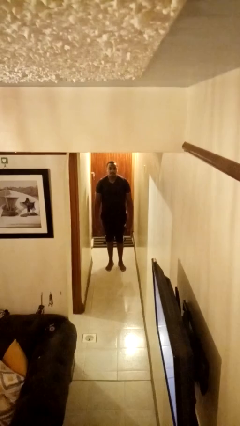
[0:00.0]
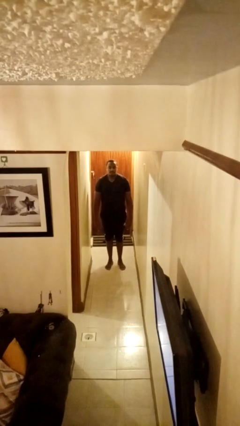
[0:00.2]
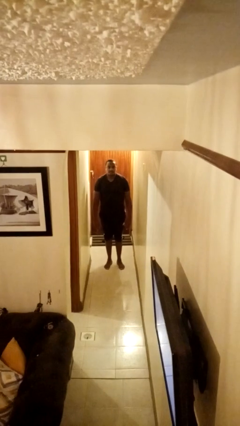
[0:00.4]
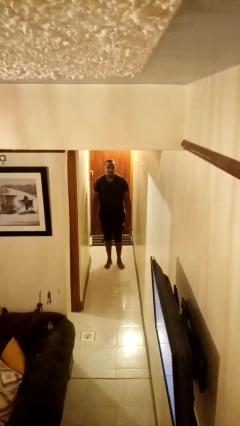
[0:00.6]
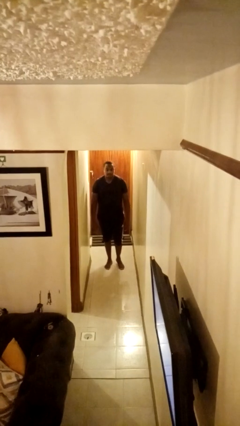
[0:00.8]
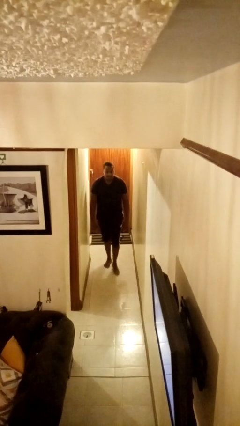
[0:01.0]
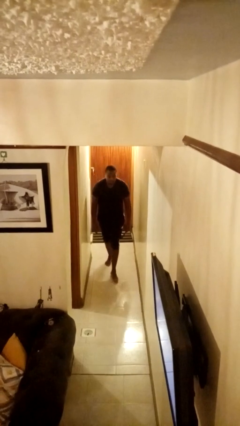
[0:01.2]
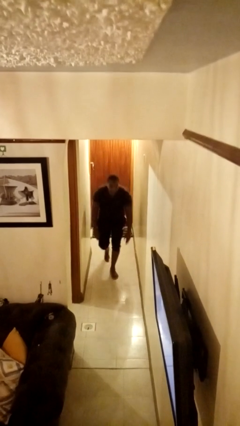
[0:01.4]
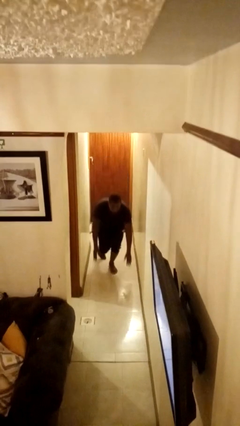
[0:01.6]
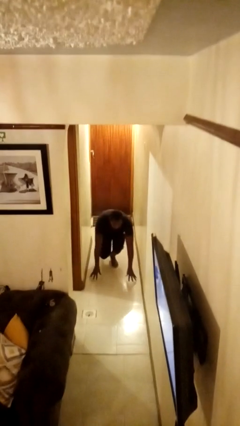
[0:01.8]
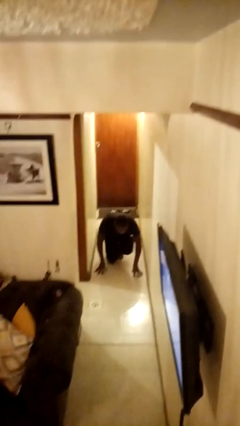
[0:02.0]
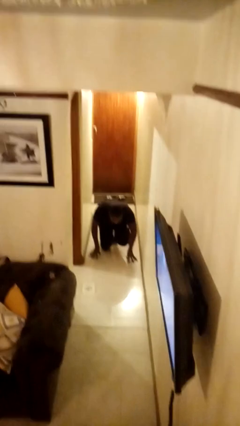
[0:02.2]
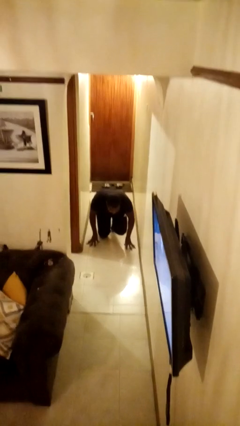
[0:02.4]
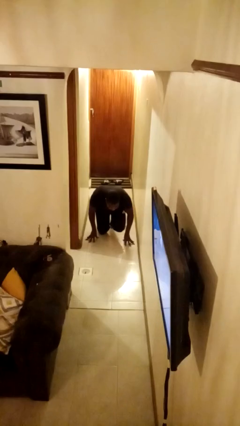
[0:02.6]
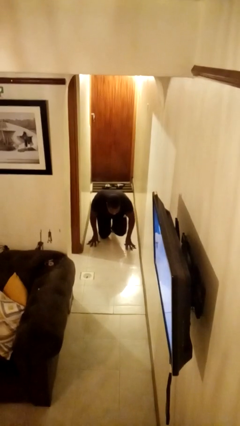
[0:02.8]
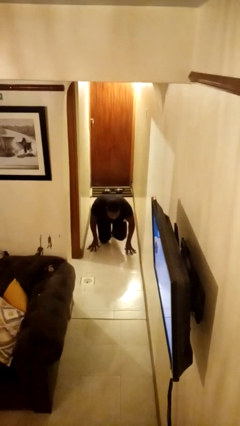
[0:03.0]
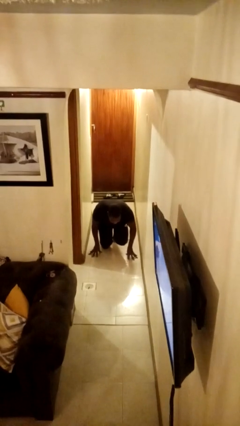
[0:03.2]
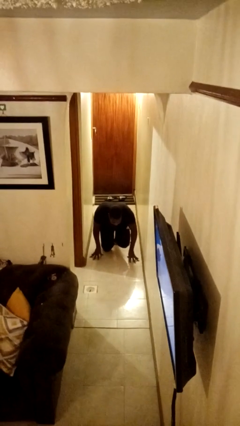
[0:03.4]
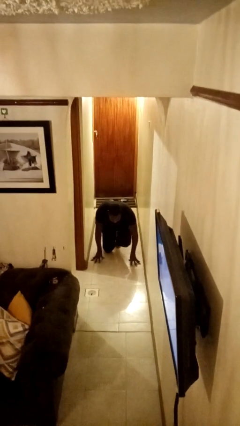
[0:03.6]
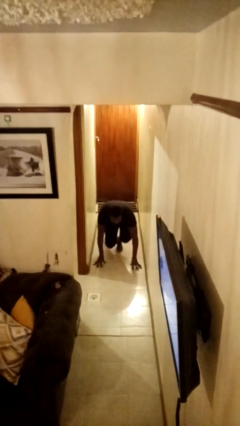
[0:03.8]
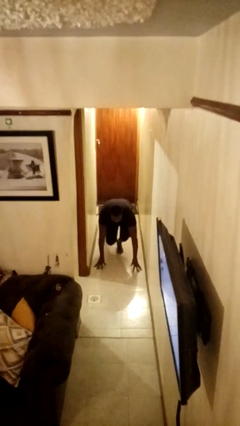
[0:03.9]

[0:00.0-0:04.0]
person trips on object on floor

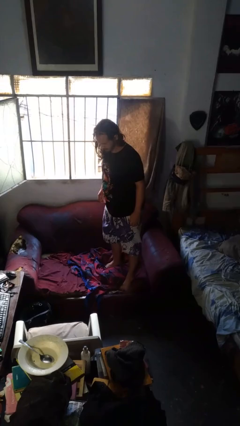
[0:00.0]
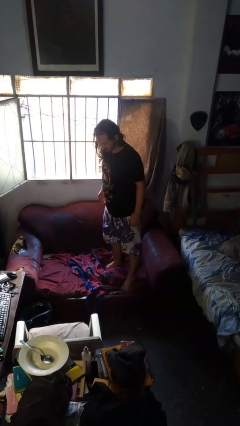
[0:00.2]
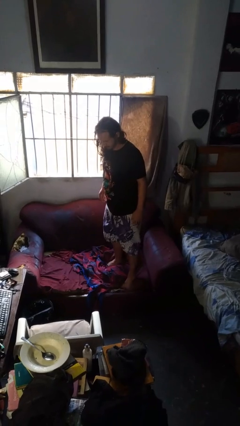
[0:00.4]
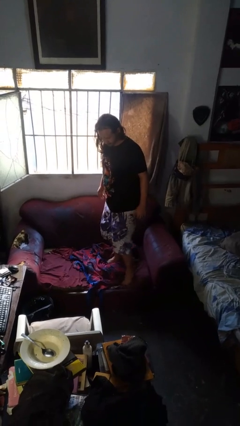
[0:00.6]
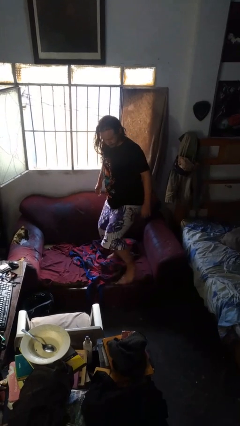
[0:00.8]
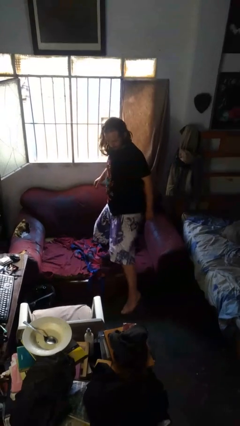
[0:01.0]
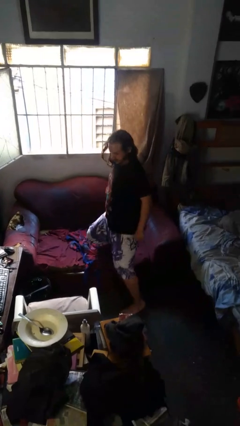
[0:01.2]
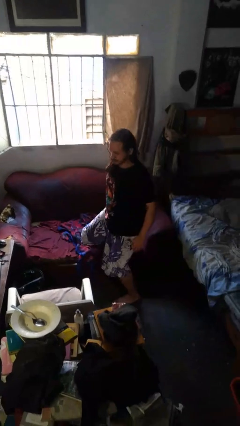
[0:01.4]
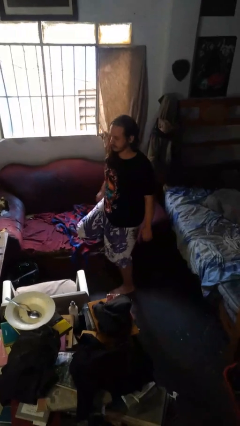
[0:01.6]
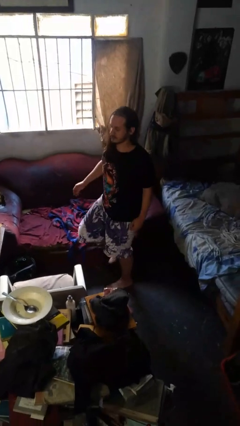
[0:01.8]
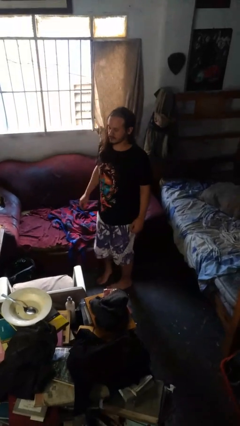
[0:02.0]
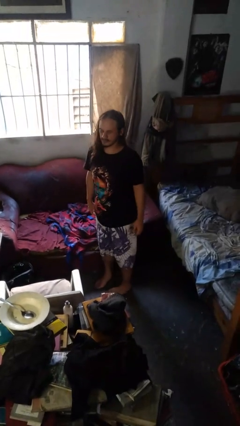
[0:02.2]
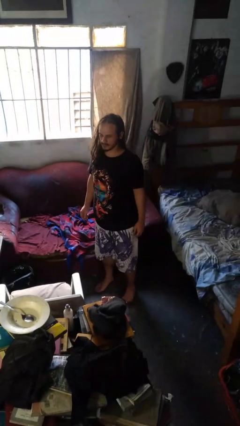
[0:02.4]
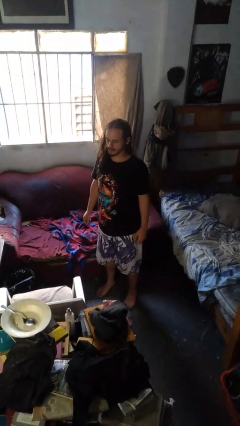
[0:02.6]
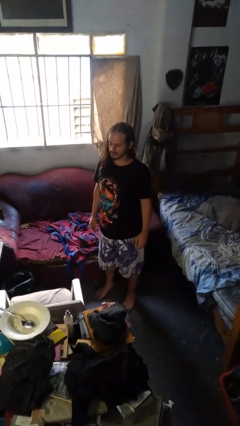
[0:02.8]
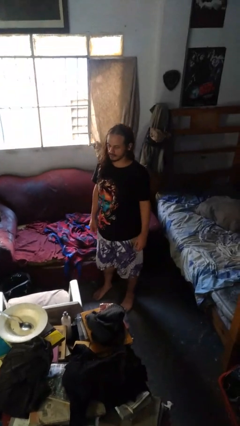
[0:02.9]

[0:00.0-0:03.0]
person climbs off couch

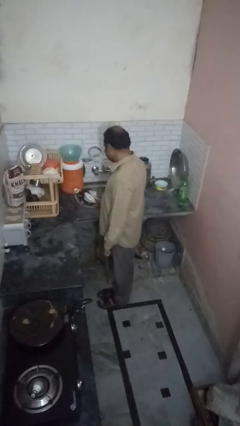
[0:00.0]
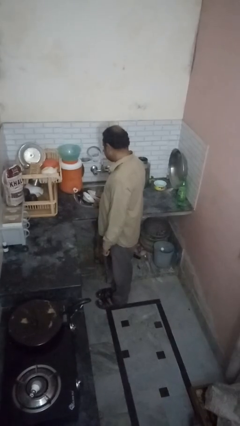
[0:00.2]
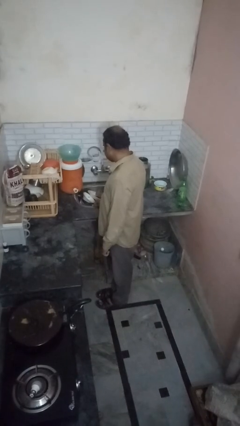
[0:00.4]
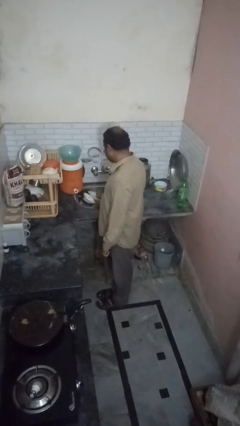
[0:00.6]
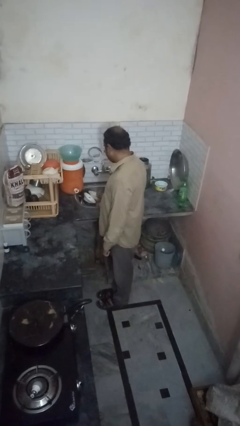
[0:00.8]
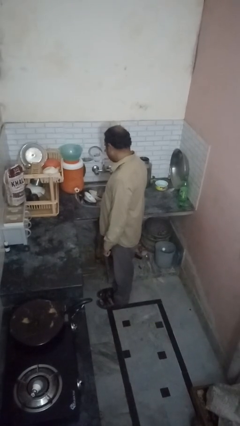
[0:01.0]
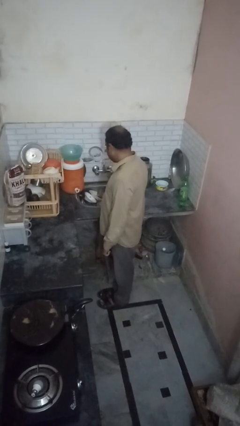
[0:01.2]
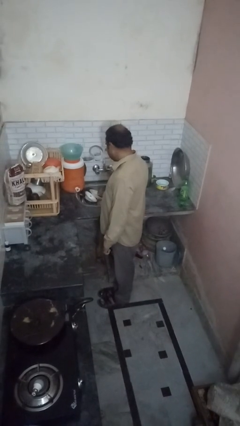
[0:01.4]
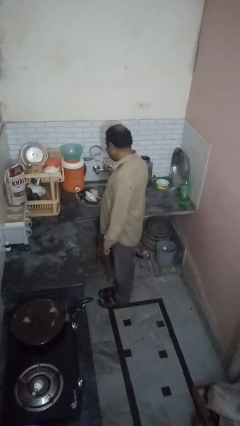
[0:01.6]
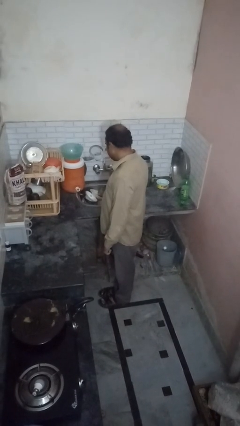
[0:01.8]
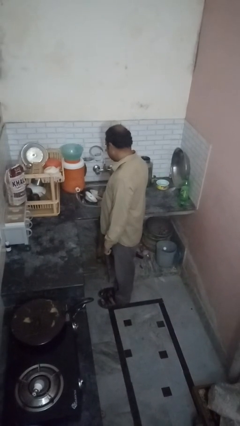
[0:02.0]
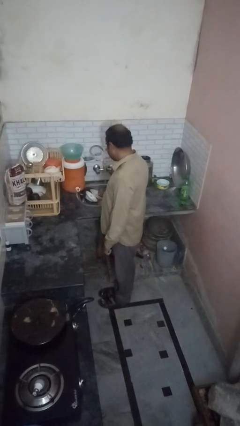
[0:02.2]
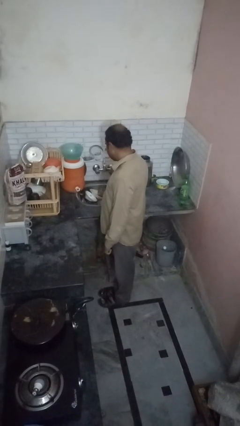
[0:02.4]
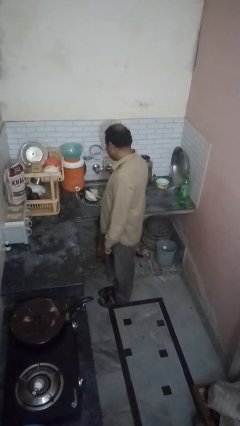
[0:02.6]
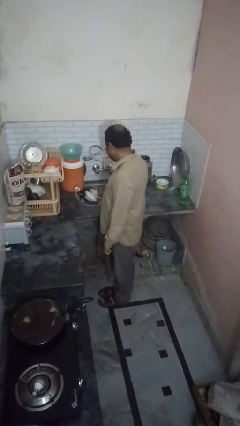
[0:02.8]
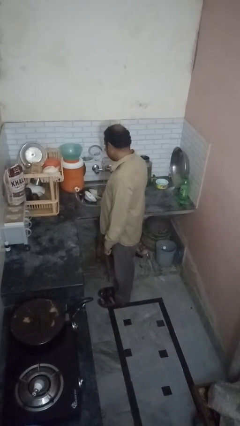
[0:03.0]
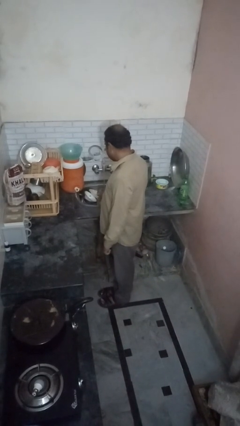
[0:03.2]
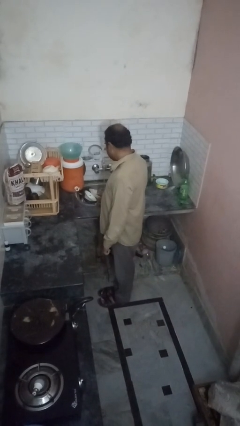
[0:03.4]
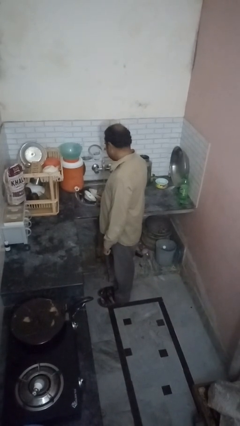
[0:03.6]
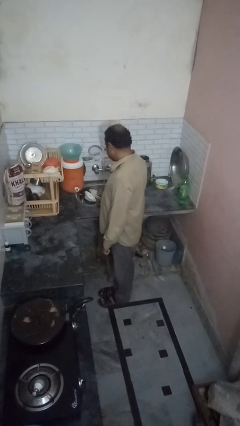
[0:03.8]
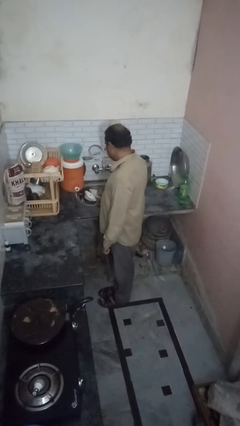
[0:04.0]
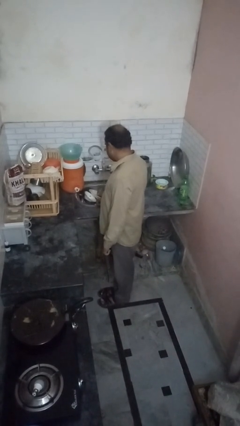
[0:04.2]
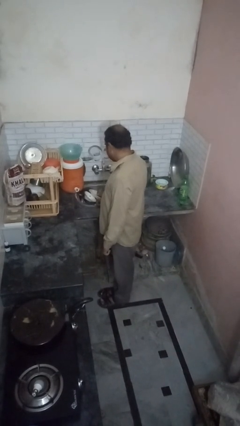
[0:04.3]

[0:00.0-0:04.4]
person opens dishwasher

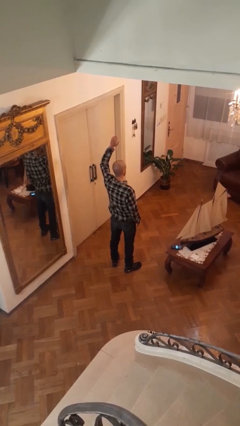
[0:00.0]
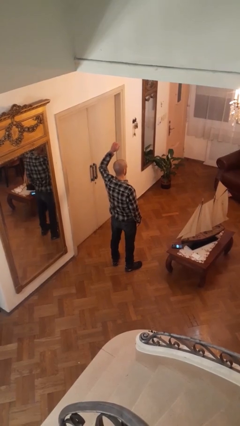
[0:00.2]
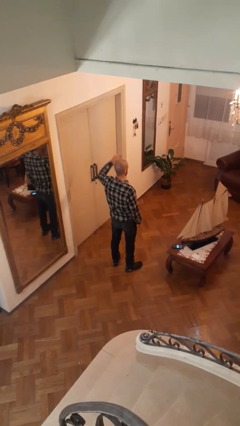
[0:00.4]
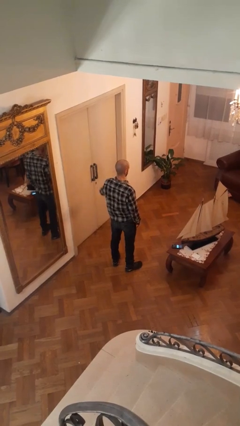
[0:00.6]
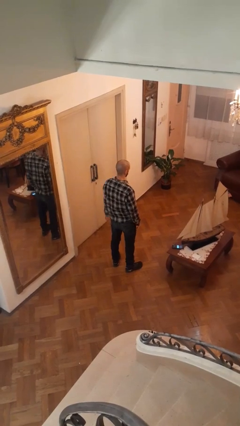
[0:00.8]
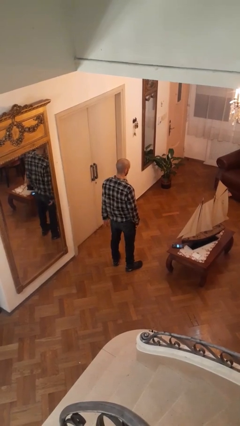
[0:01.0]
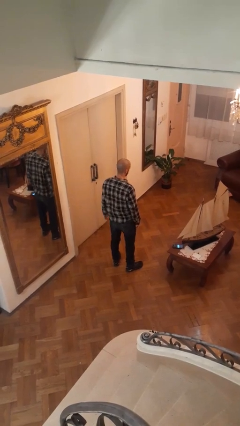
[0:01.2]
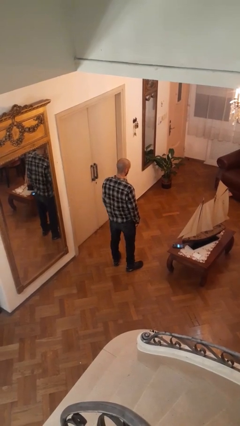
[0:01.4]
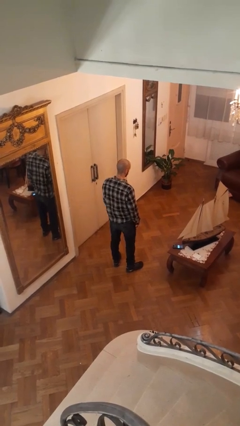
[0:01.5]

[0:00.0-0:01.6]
person gestures lower hand

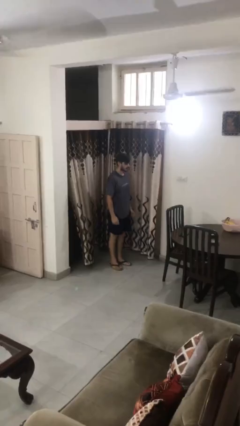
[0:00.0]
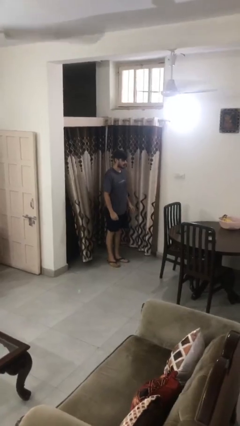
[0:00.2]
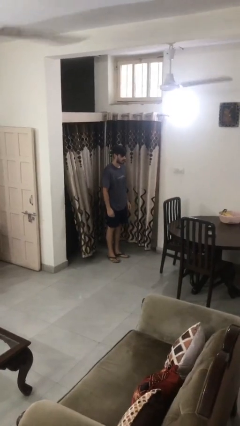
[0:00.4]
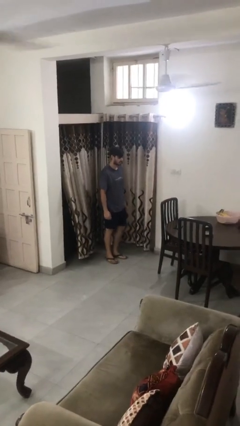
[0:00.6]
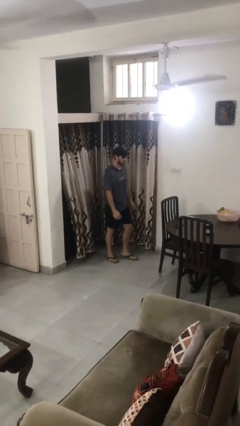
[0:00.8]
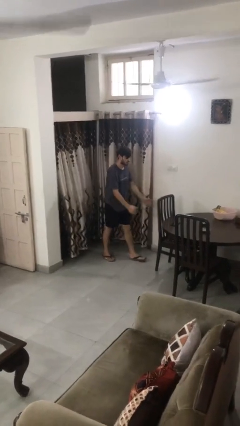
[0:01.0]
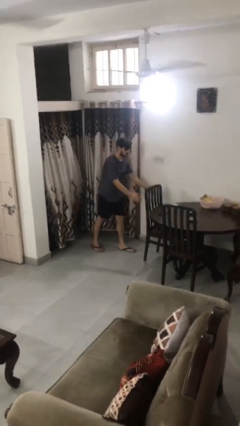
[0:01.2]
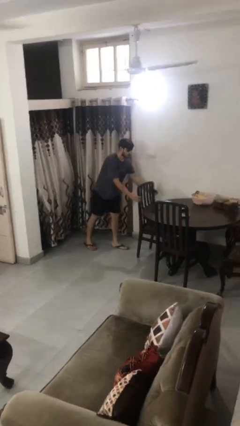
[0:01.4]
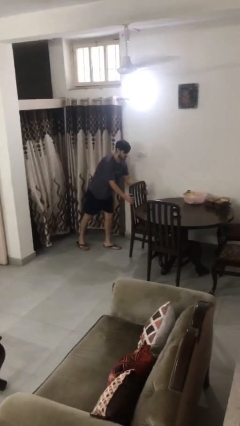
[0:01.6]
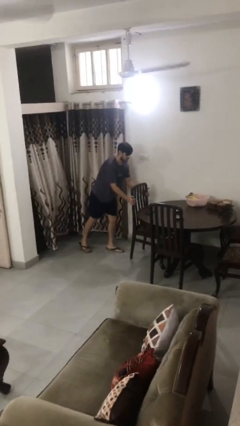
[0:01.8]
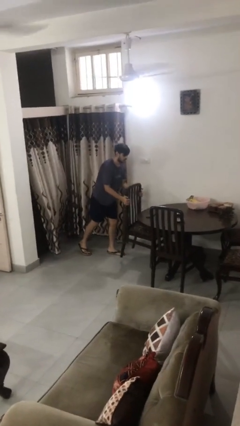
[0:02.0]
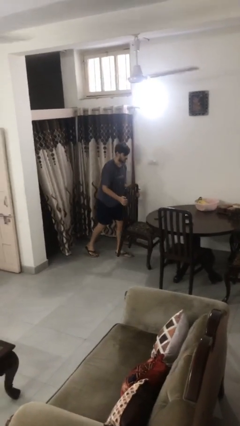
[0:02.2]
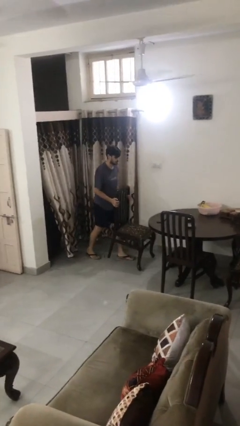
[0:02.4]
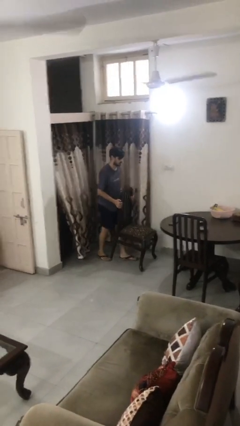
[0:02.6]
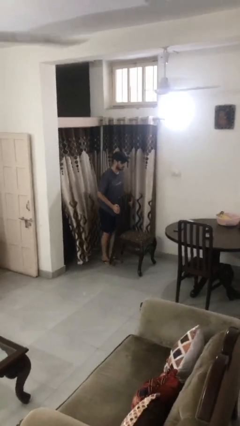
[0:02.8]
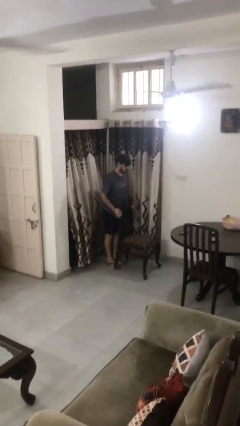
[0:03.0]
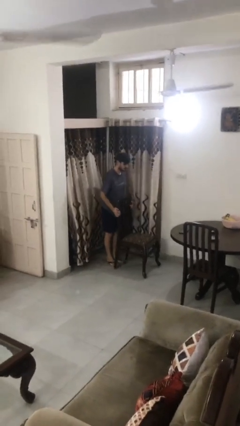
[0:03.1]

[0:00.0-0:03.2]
person pulls out chair

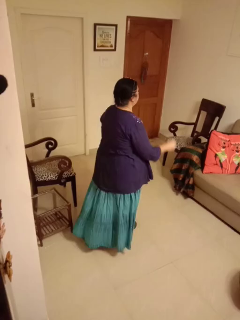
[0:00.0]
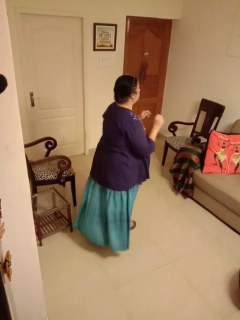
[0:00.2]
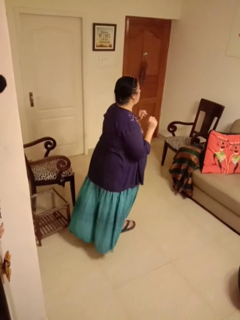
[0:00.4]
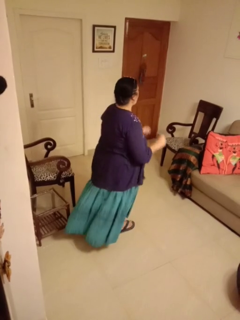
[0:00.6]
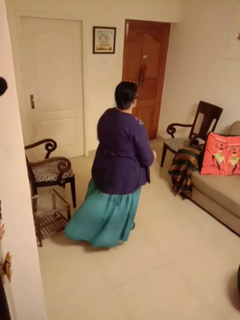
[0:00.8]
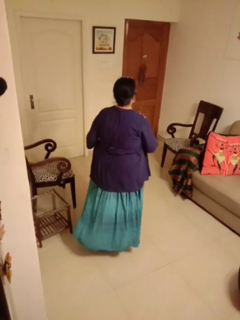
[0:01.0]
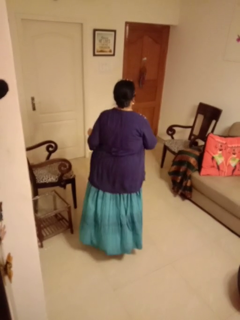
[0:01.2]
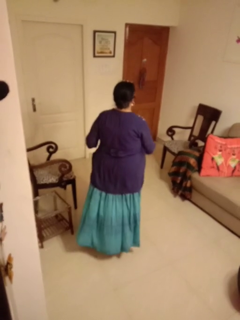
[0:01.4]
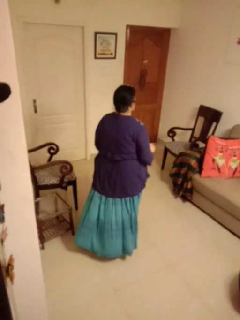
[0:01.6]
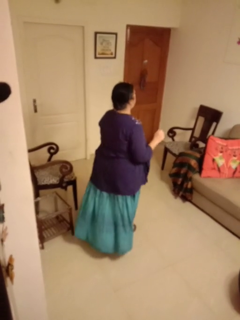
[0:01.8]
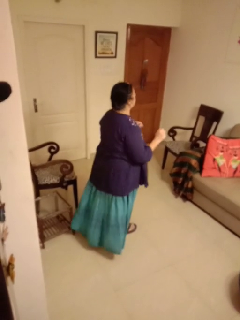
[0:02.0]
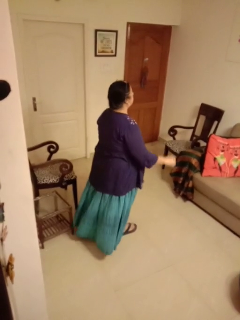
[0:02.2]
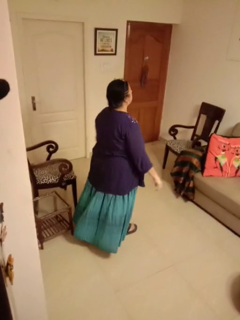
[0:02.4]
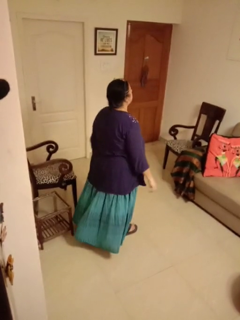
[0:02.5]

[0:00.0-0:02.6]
person dances in place
